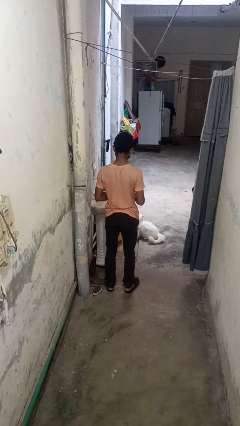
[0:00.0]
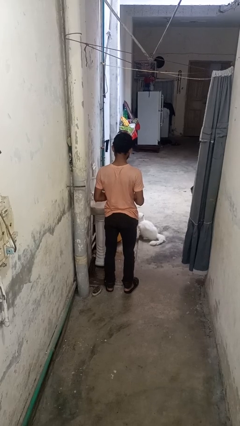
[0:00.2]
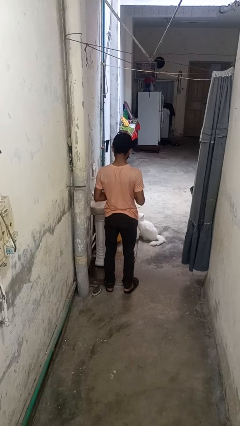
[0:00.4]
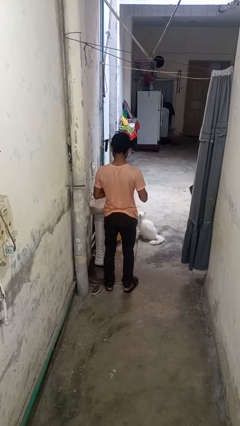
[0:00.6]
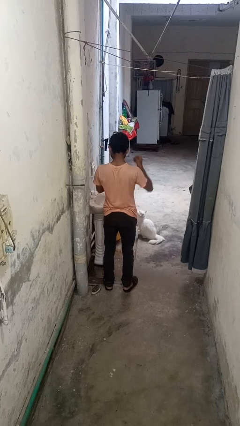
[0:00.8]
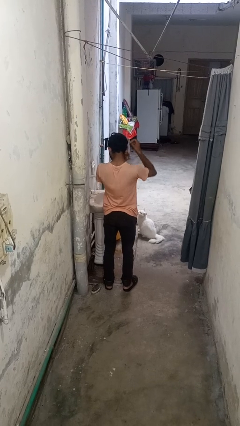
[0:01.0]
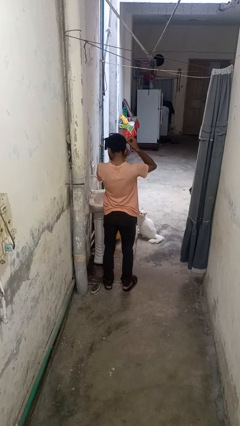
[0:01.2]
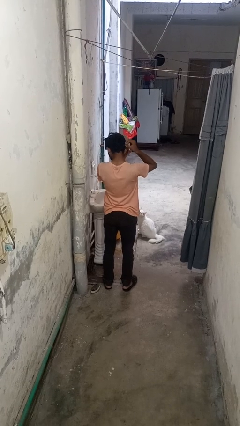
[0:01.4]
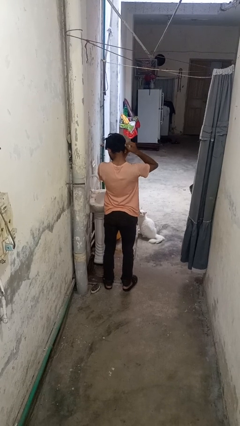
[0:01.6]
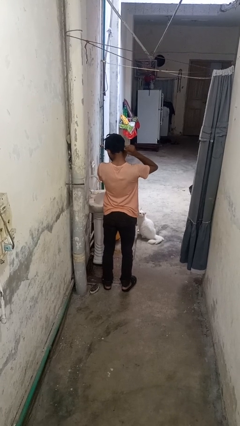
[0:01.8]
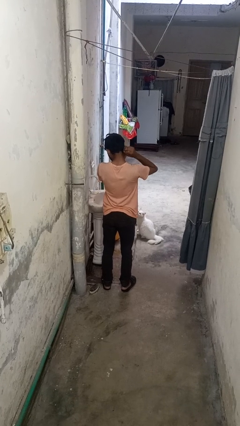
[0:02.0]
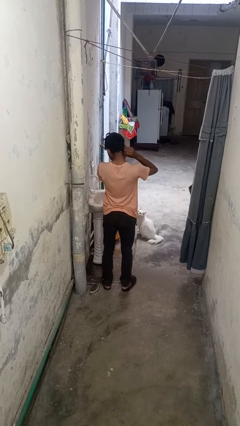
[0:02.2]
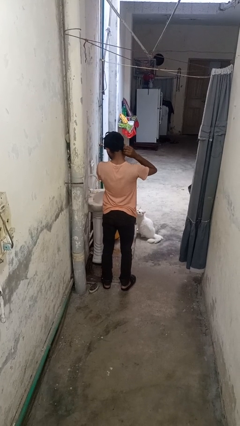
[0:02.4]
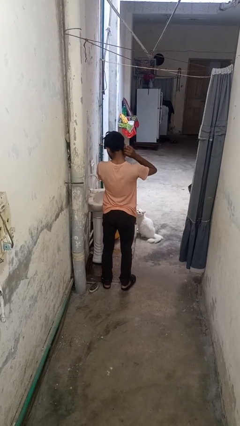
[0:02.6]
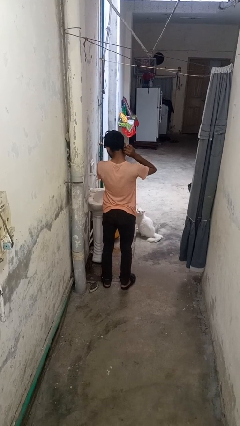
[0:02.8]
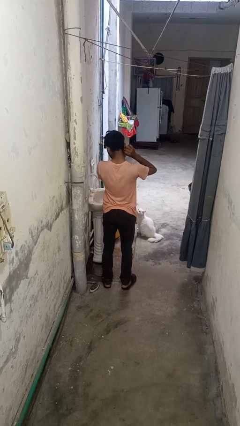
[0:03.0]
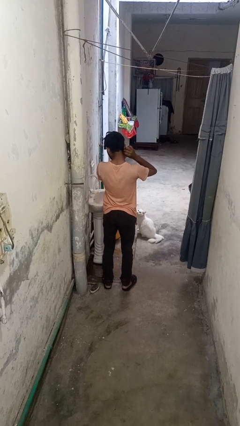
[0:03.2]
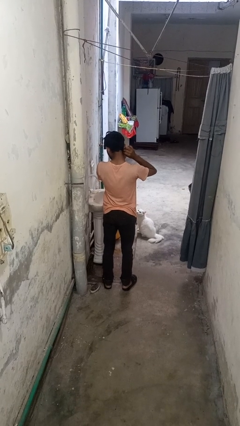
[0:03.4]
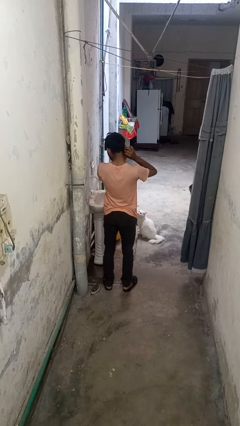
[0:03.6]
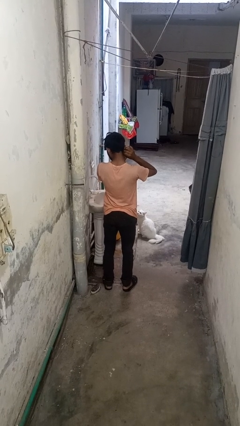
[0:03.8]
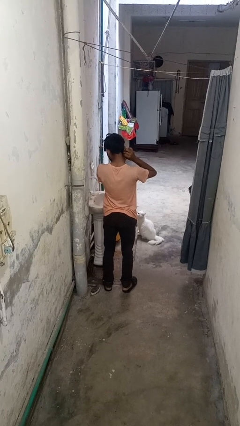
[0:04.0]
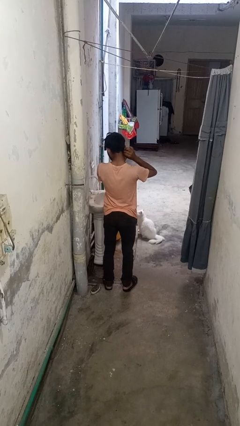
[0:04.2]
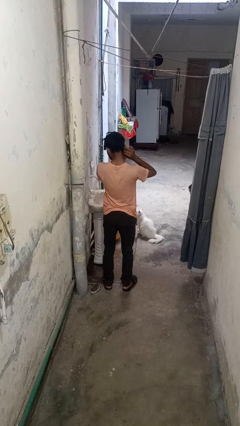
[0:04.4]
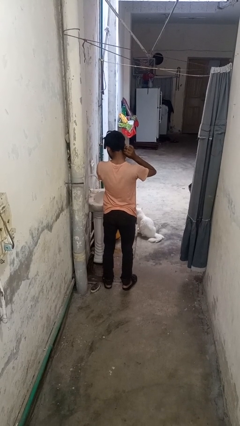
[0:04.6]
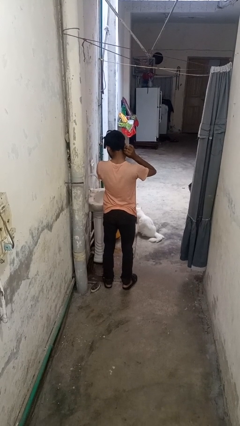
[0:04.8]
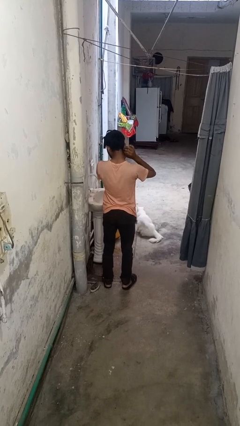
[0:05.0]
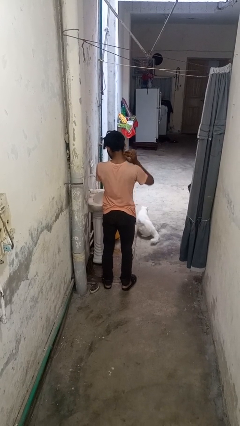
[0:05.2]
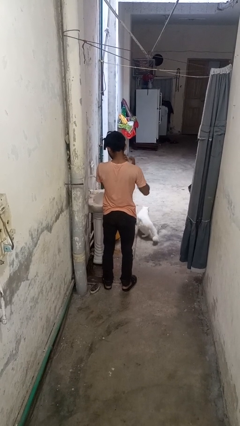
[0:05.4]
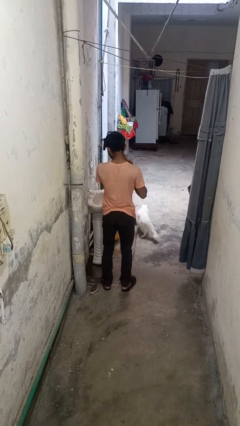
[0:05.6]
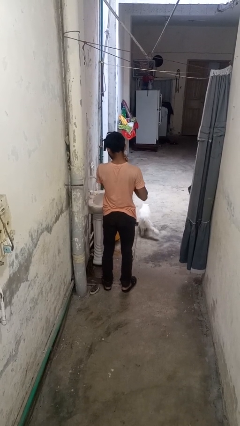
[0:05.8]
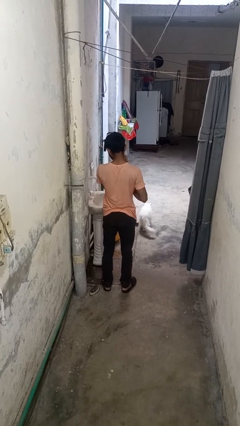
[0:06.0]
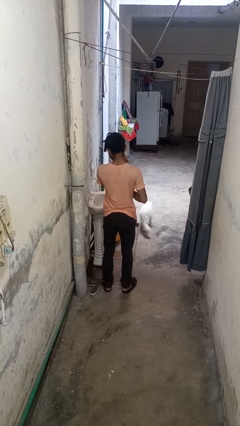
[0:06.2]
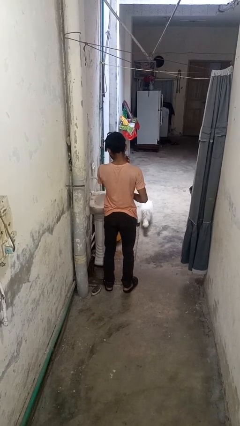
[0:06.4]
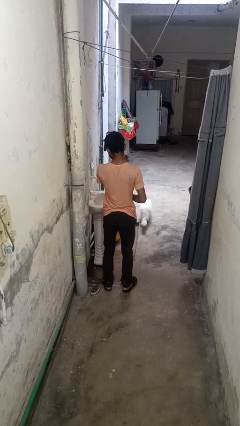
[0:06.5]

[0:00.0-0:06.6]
person puts on earrings

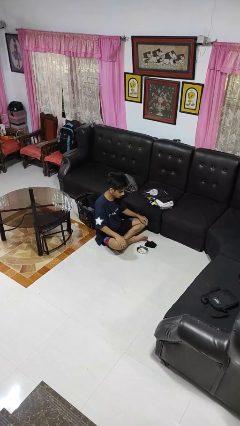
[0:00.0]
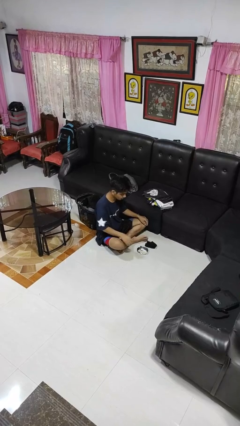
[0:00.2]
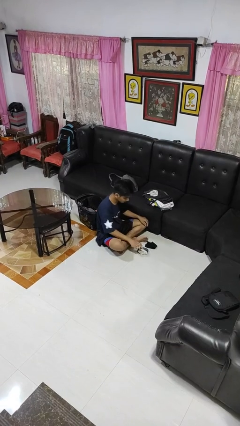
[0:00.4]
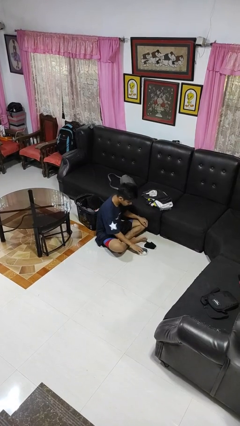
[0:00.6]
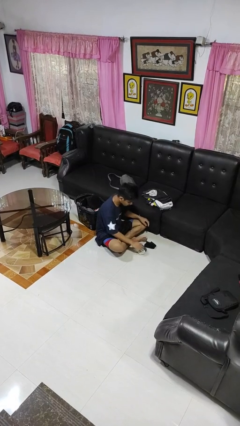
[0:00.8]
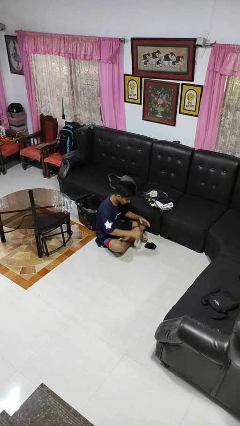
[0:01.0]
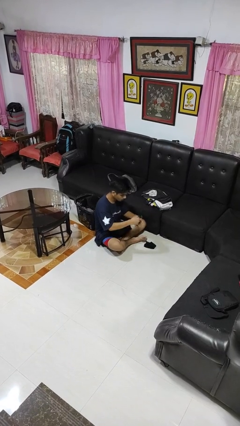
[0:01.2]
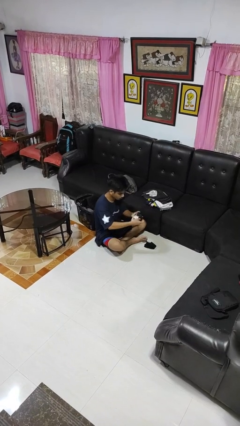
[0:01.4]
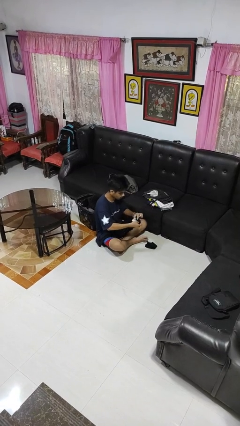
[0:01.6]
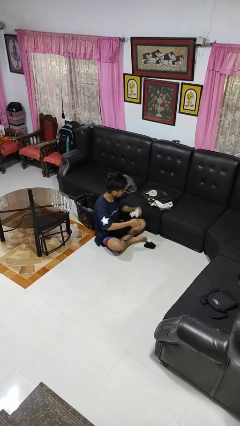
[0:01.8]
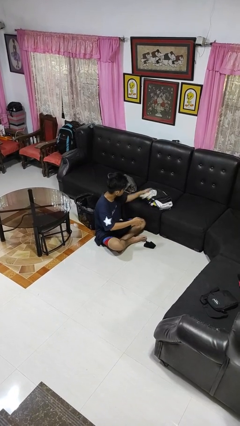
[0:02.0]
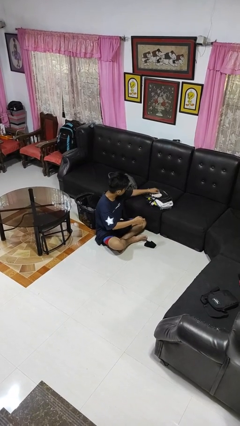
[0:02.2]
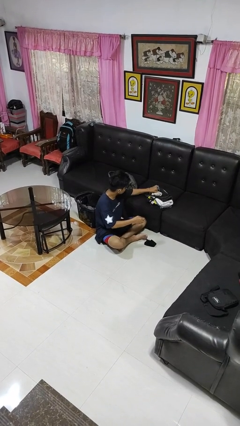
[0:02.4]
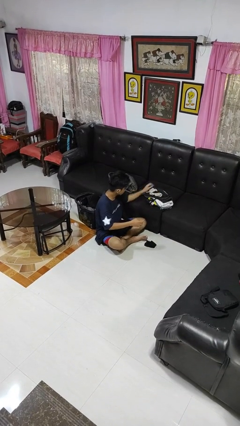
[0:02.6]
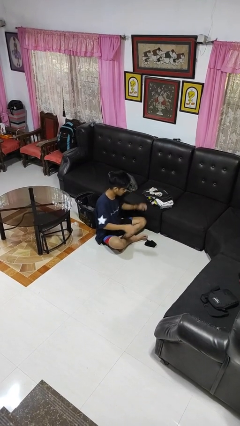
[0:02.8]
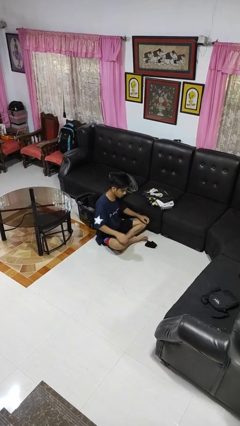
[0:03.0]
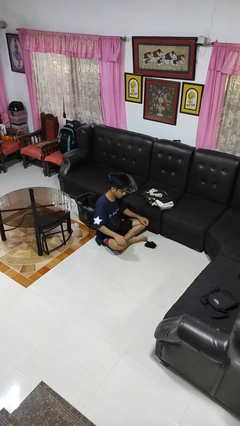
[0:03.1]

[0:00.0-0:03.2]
person folds socks

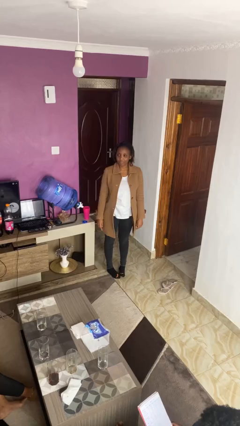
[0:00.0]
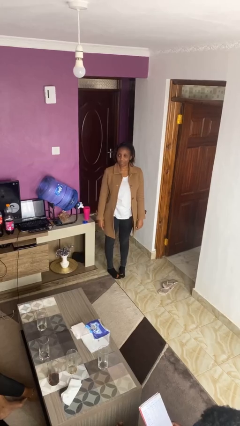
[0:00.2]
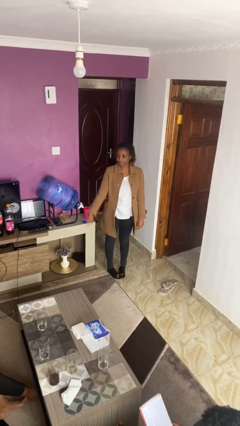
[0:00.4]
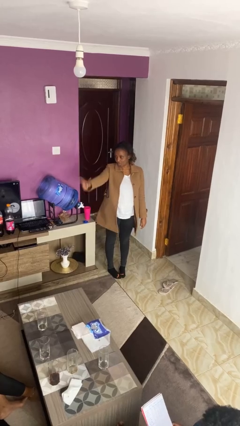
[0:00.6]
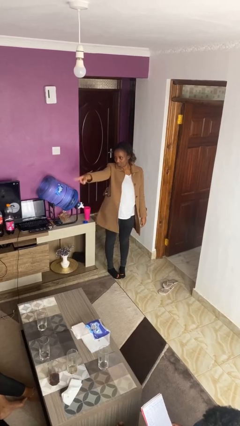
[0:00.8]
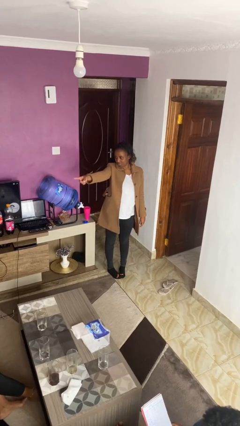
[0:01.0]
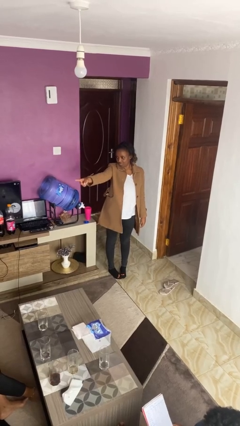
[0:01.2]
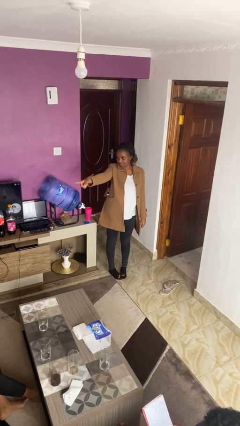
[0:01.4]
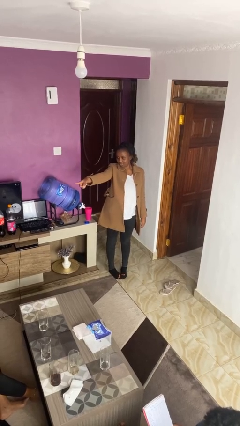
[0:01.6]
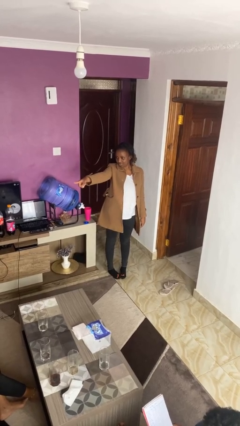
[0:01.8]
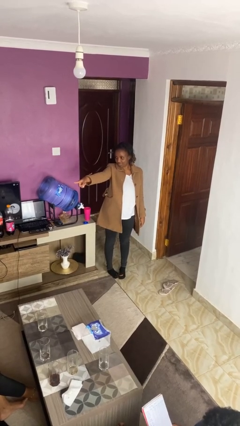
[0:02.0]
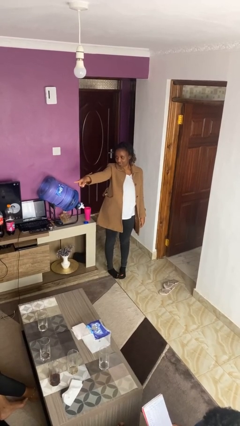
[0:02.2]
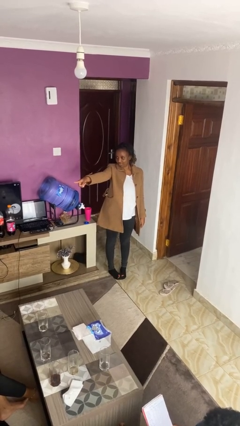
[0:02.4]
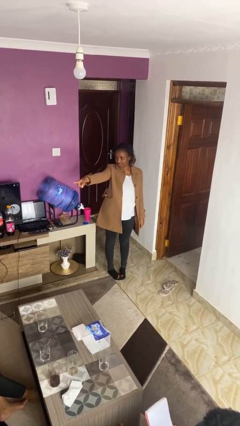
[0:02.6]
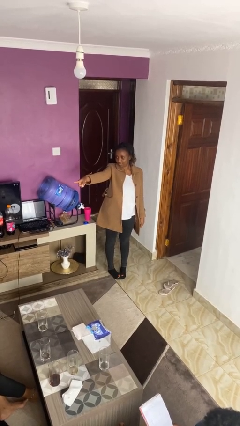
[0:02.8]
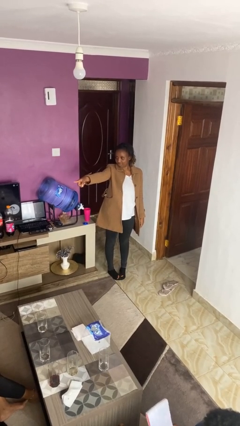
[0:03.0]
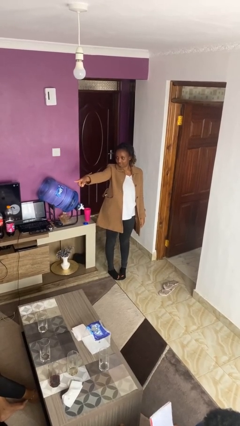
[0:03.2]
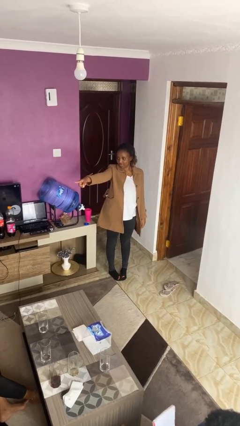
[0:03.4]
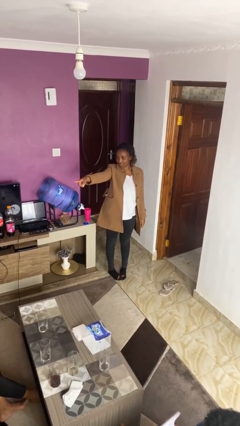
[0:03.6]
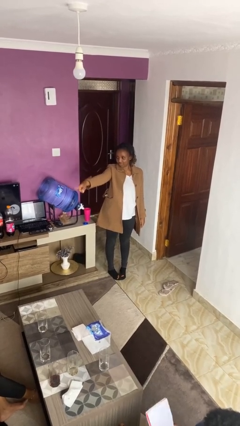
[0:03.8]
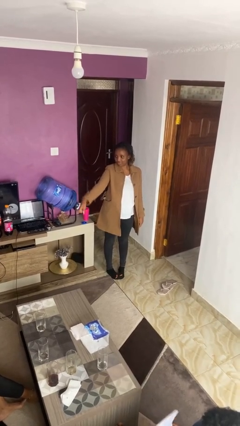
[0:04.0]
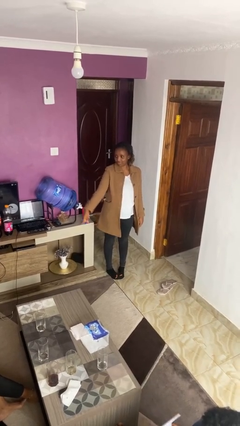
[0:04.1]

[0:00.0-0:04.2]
person points at person

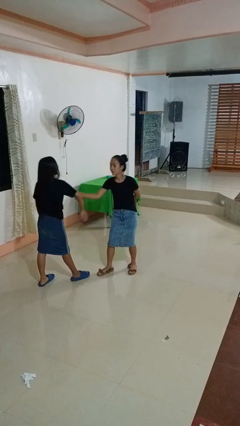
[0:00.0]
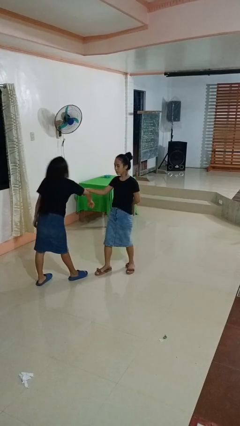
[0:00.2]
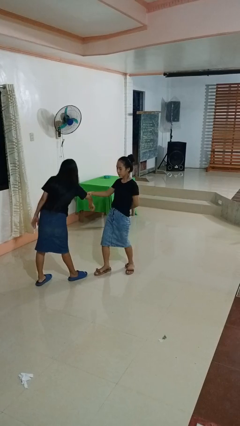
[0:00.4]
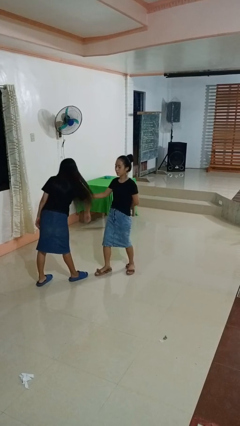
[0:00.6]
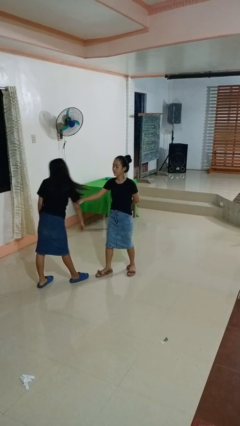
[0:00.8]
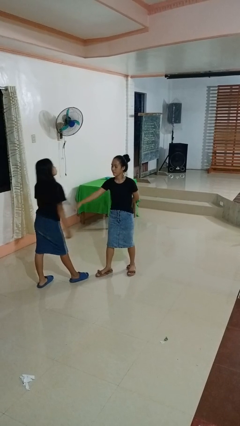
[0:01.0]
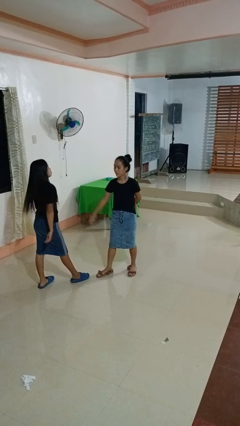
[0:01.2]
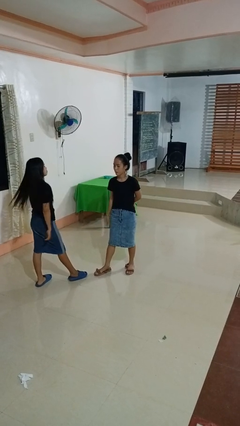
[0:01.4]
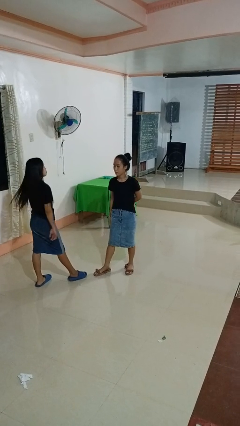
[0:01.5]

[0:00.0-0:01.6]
person grabs person by bicep

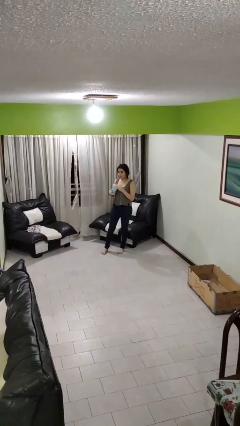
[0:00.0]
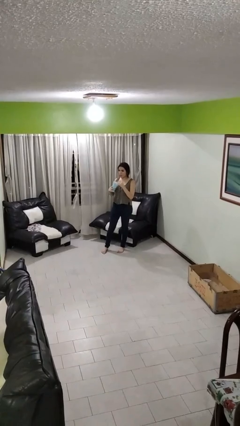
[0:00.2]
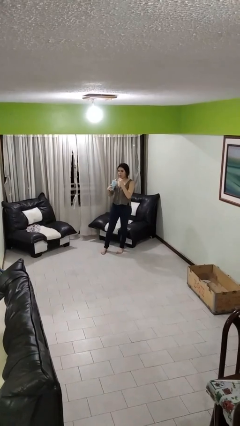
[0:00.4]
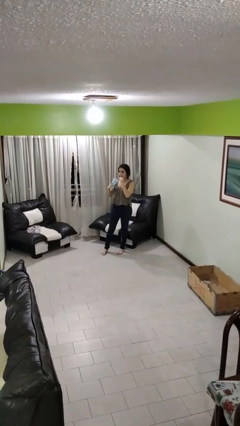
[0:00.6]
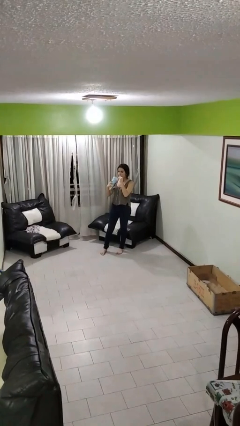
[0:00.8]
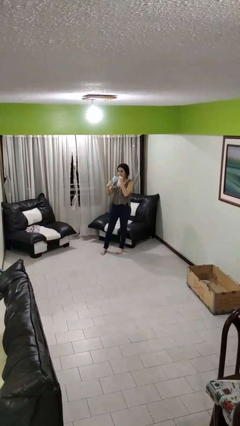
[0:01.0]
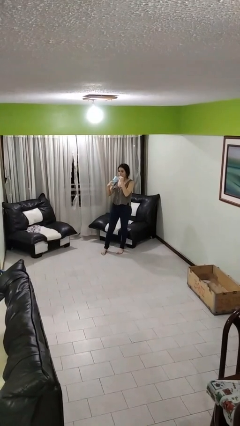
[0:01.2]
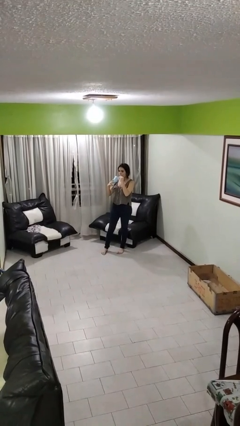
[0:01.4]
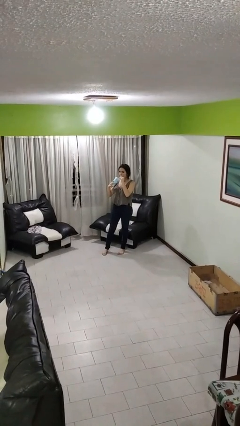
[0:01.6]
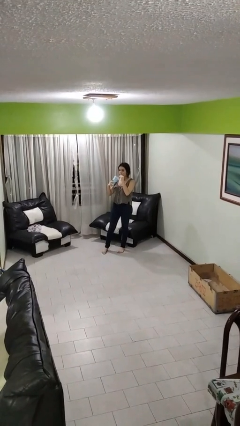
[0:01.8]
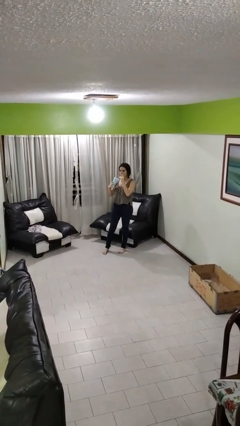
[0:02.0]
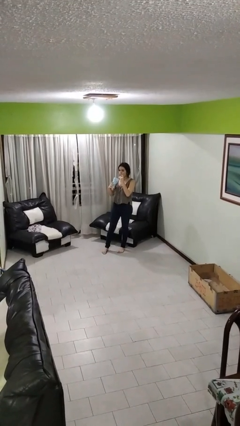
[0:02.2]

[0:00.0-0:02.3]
person drinks from straw
